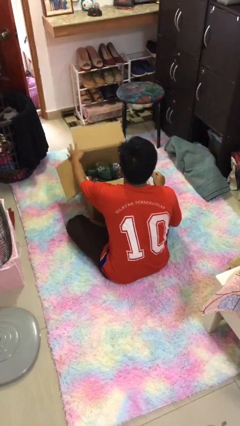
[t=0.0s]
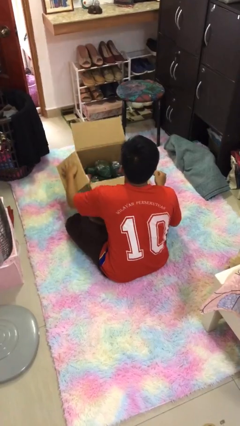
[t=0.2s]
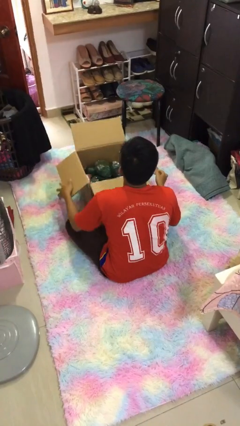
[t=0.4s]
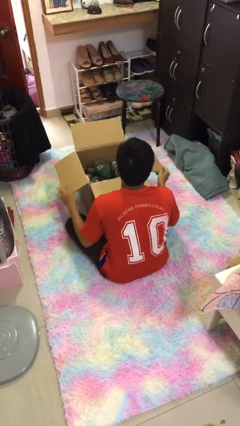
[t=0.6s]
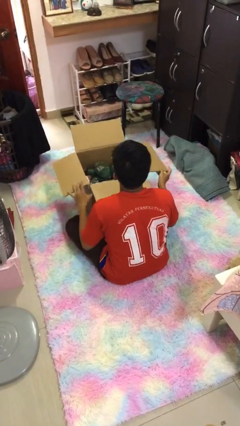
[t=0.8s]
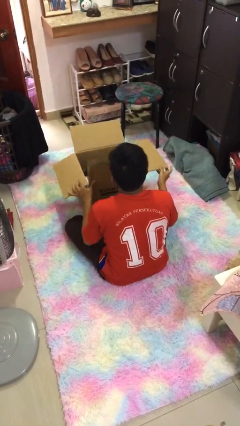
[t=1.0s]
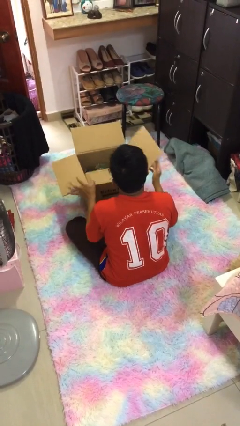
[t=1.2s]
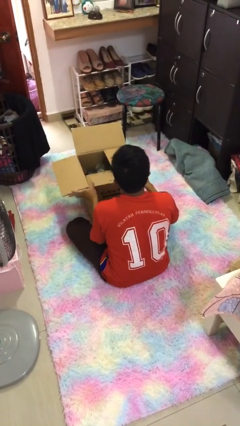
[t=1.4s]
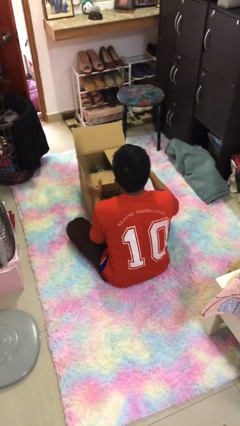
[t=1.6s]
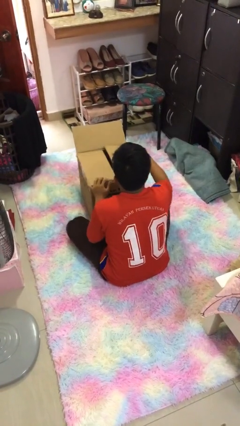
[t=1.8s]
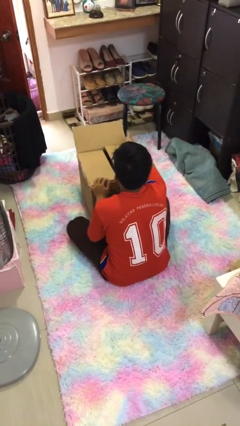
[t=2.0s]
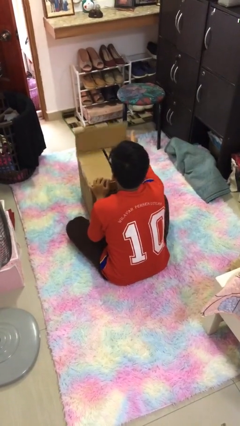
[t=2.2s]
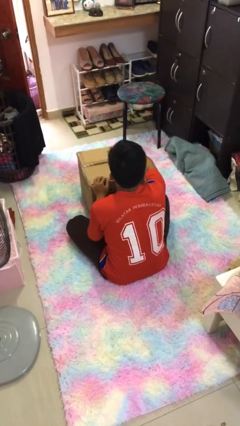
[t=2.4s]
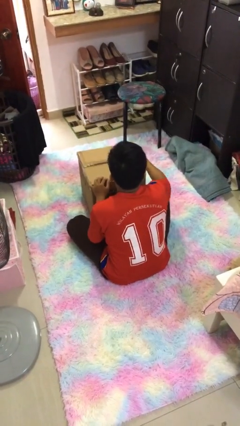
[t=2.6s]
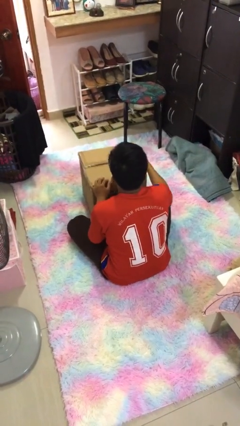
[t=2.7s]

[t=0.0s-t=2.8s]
person closes box

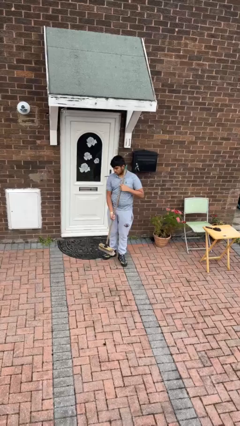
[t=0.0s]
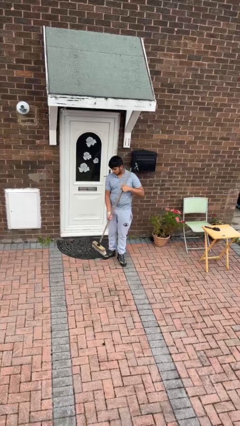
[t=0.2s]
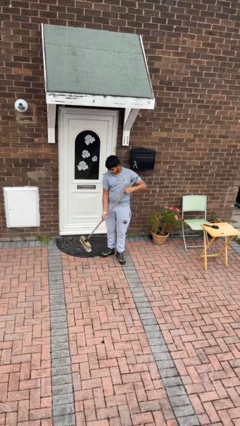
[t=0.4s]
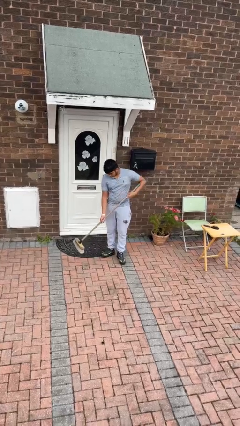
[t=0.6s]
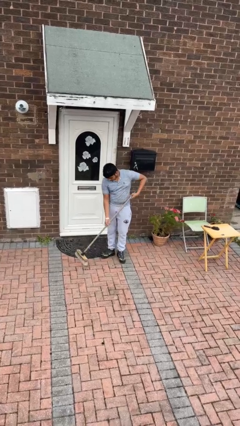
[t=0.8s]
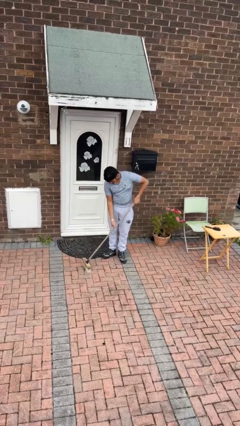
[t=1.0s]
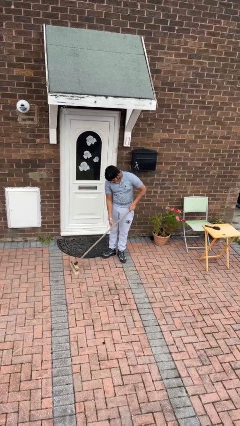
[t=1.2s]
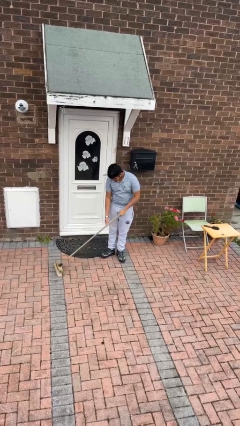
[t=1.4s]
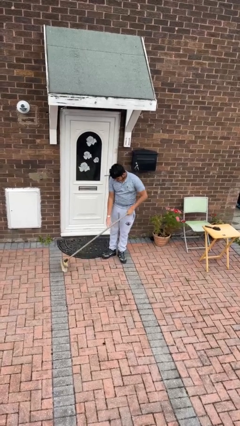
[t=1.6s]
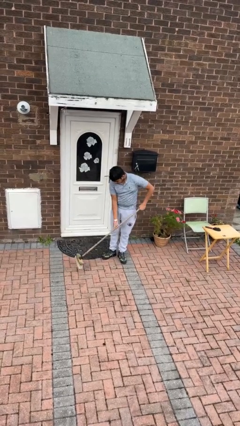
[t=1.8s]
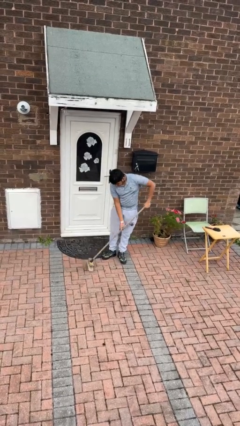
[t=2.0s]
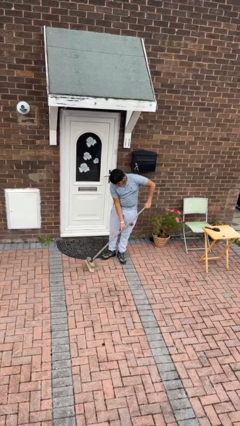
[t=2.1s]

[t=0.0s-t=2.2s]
person sweeps floor

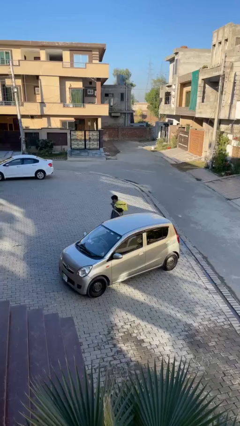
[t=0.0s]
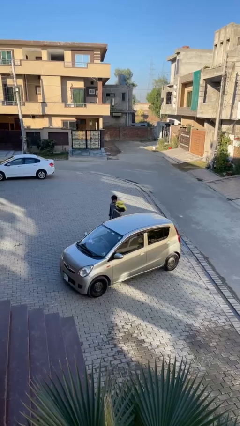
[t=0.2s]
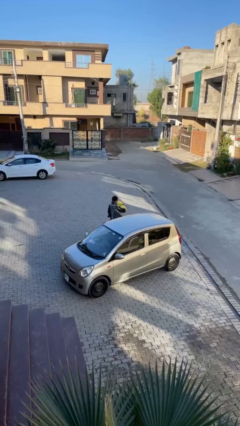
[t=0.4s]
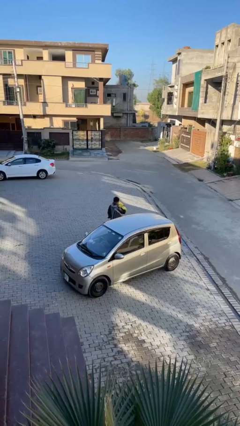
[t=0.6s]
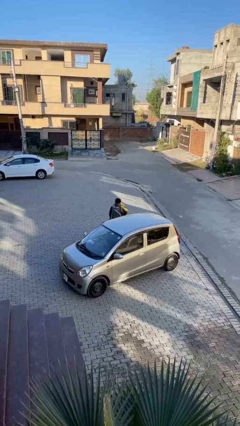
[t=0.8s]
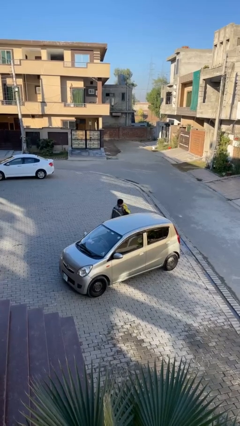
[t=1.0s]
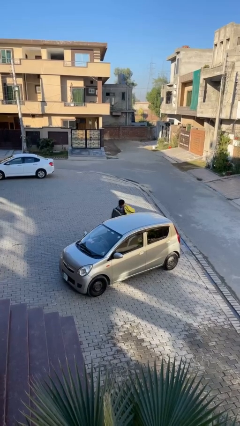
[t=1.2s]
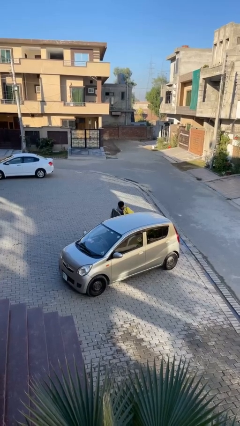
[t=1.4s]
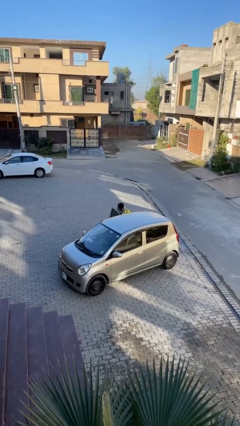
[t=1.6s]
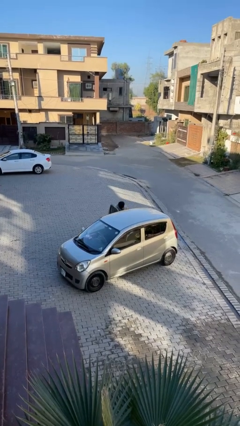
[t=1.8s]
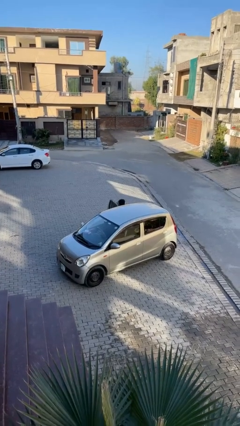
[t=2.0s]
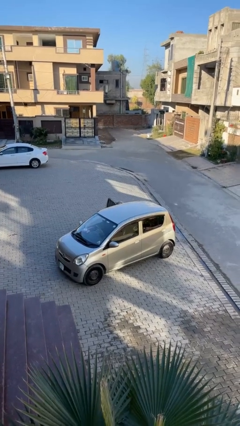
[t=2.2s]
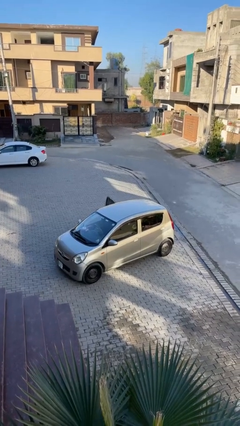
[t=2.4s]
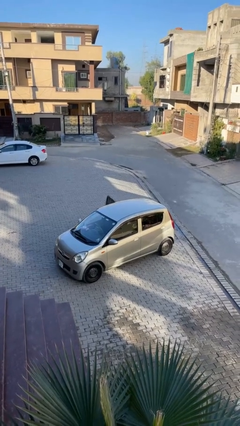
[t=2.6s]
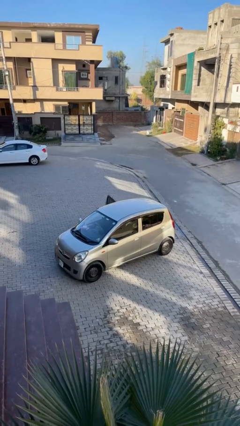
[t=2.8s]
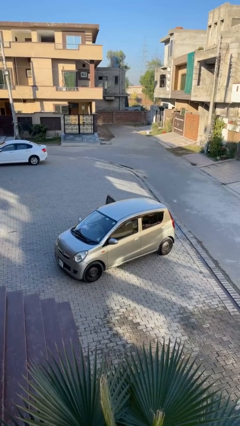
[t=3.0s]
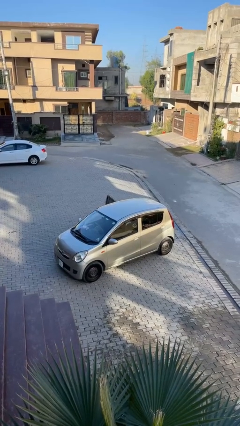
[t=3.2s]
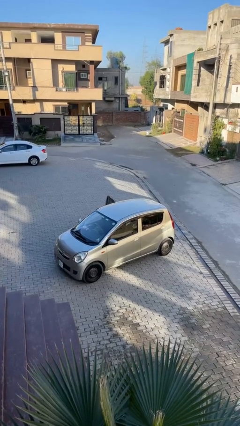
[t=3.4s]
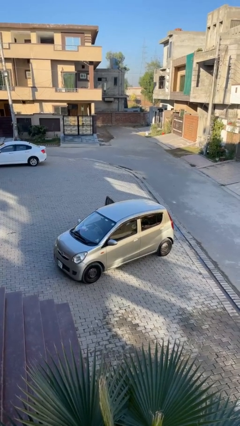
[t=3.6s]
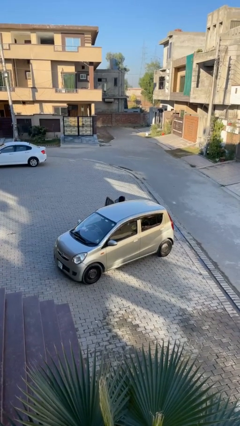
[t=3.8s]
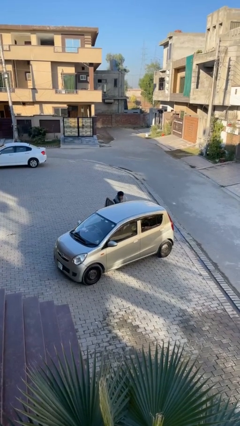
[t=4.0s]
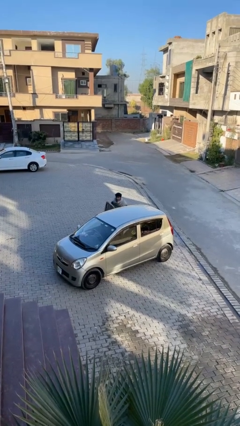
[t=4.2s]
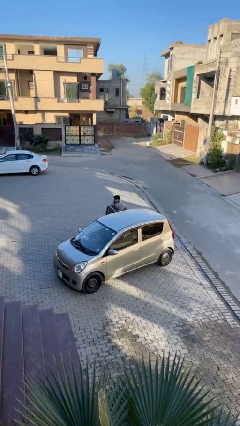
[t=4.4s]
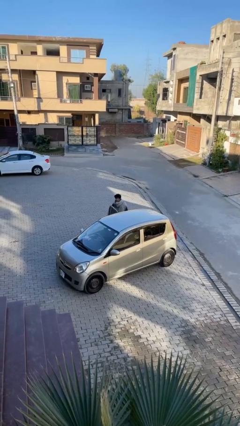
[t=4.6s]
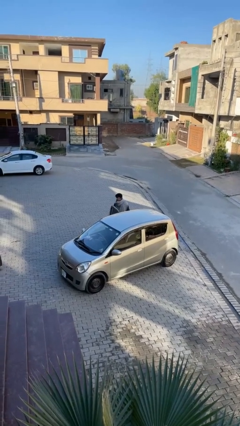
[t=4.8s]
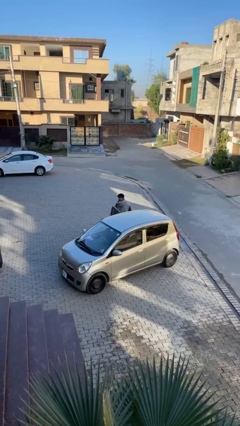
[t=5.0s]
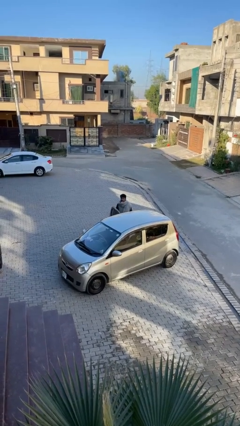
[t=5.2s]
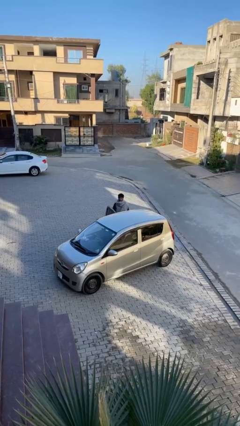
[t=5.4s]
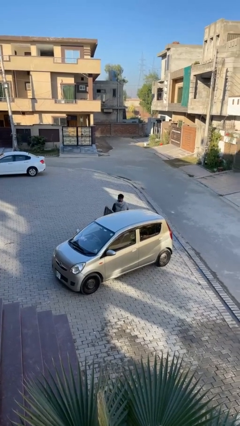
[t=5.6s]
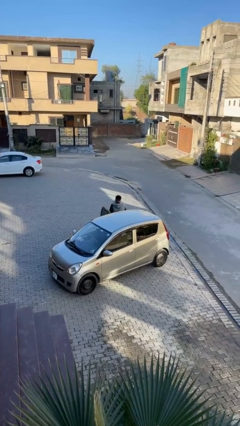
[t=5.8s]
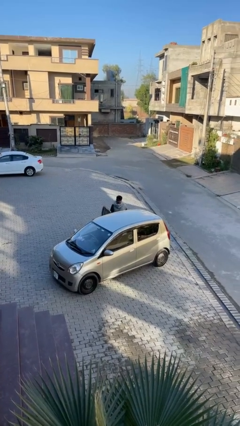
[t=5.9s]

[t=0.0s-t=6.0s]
person loads car

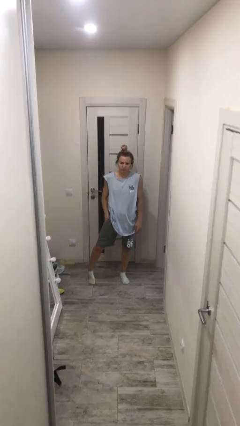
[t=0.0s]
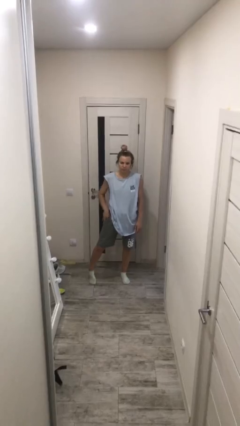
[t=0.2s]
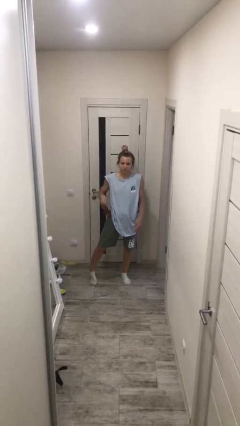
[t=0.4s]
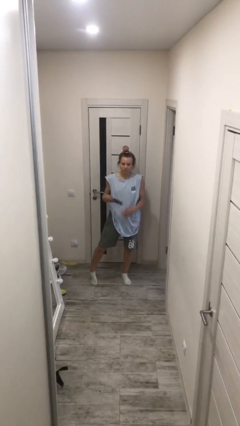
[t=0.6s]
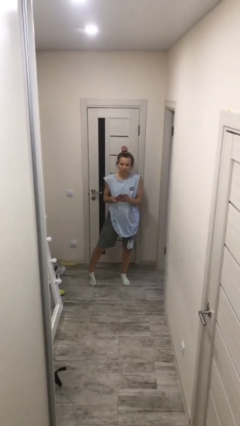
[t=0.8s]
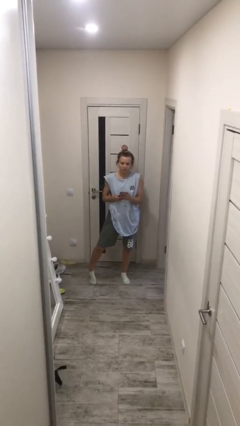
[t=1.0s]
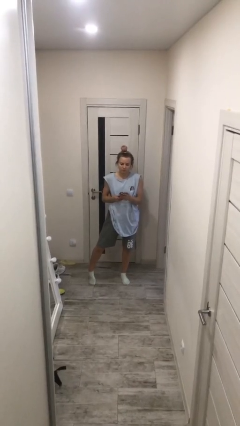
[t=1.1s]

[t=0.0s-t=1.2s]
person takes phone from pocket

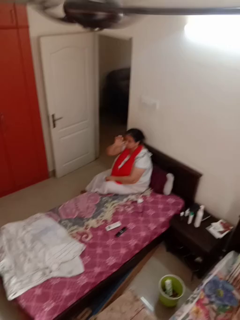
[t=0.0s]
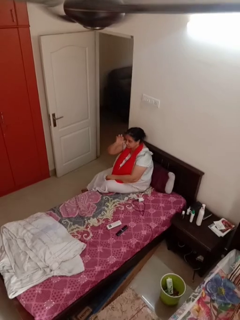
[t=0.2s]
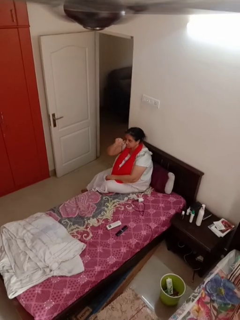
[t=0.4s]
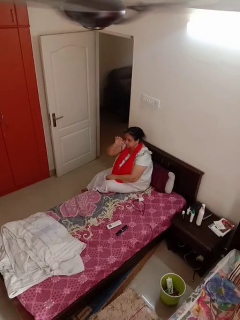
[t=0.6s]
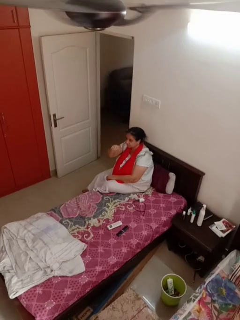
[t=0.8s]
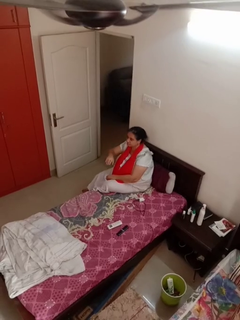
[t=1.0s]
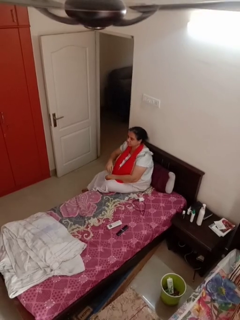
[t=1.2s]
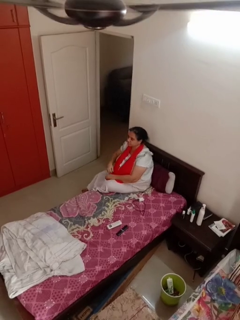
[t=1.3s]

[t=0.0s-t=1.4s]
person gestures come here

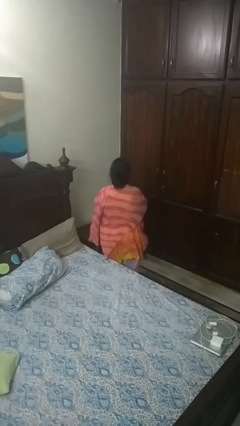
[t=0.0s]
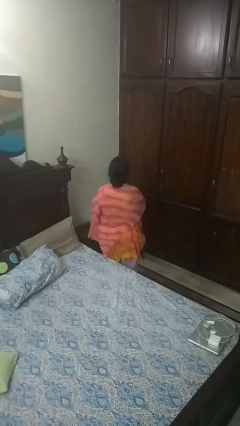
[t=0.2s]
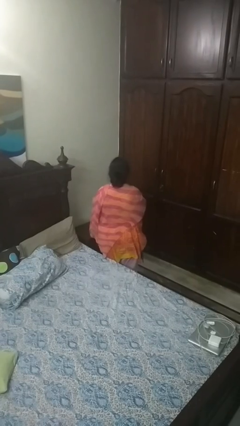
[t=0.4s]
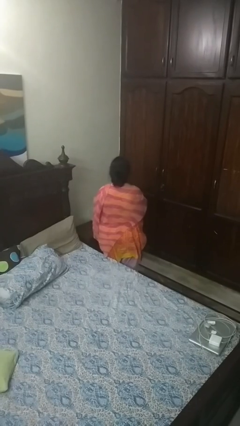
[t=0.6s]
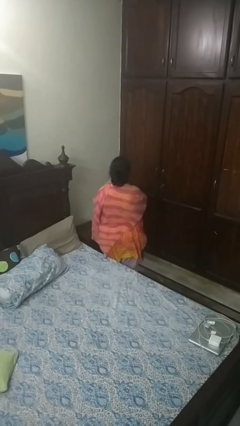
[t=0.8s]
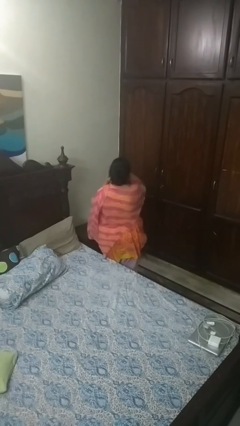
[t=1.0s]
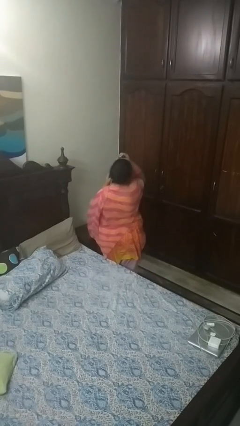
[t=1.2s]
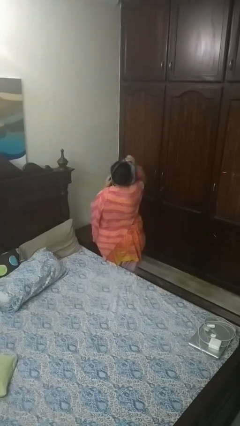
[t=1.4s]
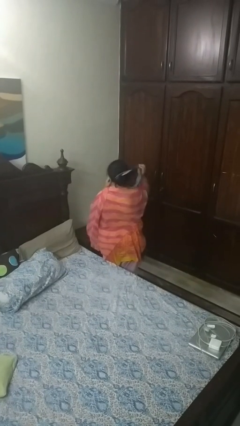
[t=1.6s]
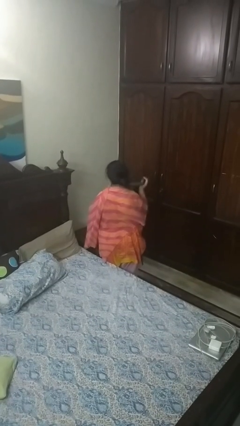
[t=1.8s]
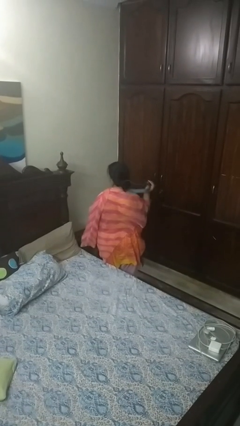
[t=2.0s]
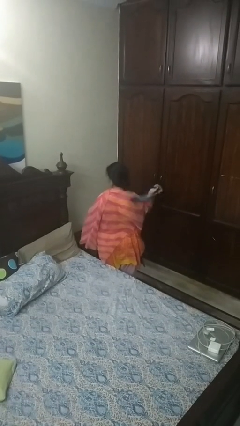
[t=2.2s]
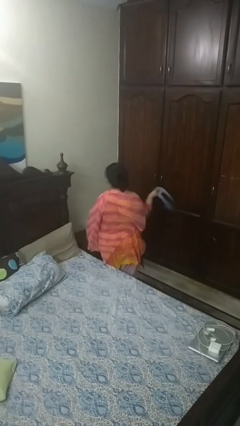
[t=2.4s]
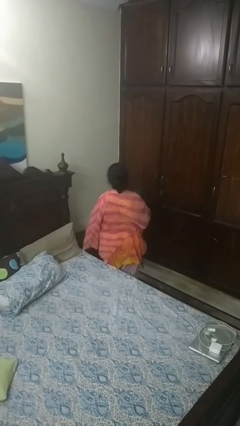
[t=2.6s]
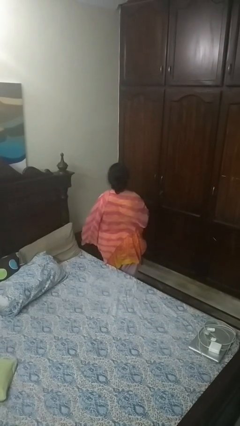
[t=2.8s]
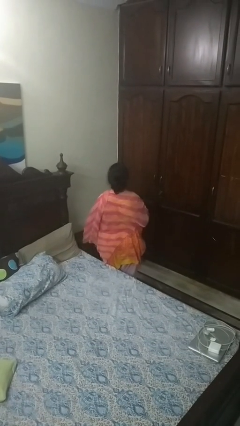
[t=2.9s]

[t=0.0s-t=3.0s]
person takes off necktie

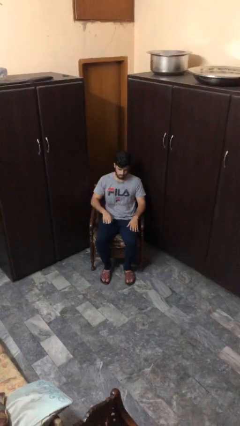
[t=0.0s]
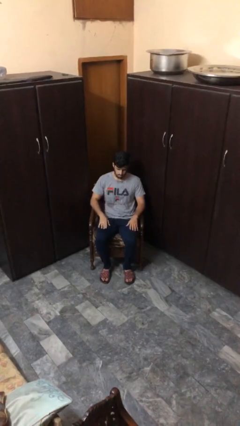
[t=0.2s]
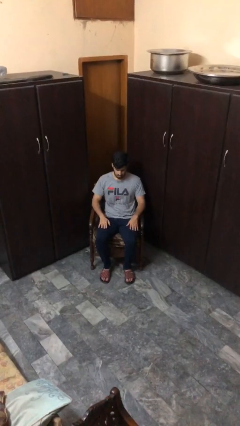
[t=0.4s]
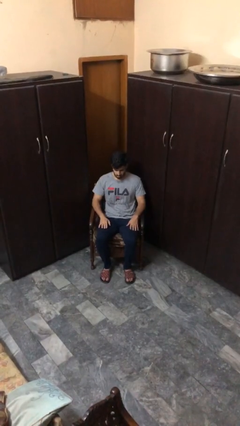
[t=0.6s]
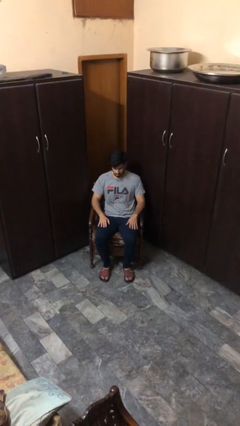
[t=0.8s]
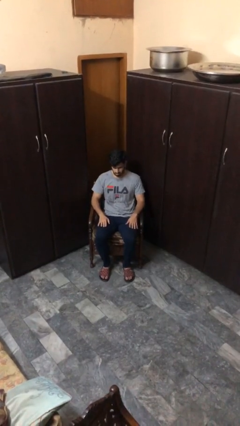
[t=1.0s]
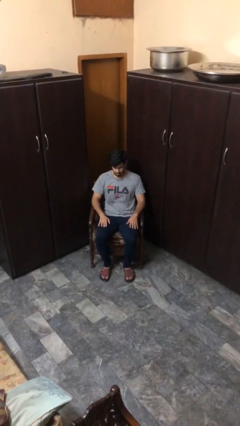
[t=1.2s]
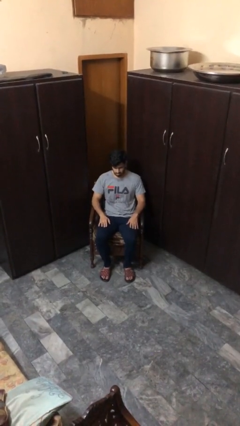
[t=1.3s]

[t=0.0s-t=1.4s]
person gestures lower hand
